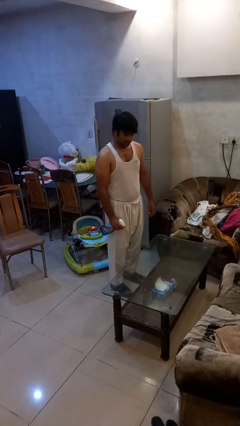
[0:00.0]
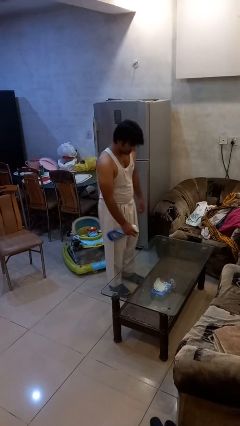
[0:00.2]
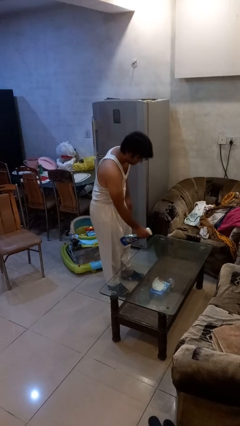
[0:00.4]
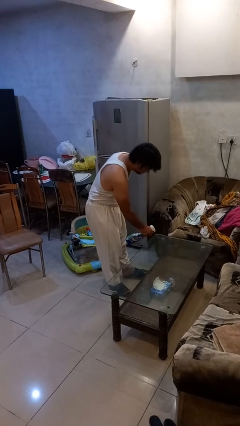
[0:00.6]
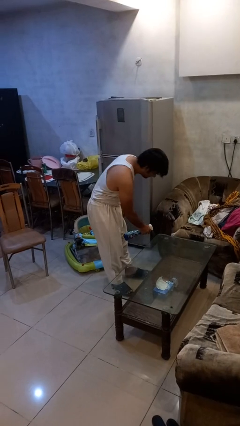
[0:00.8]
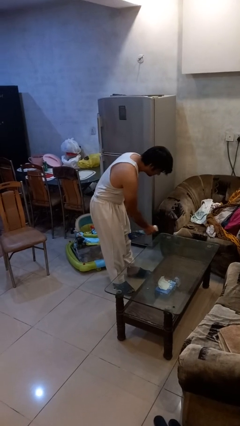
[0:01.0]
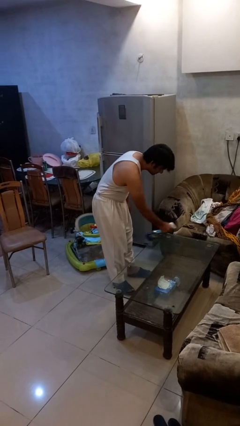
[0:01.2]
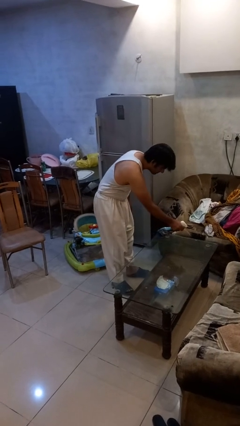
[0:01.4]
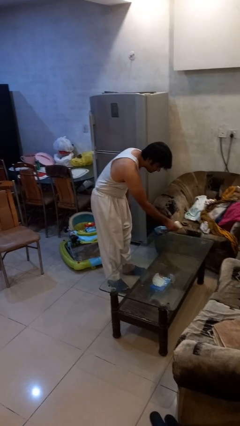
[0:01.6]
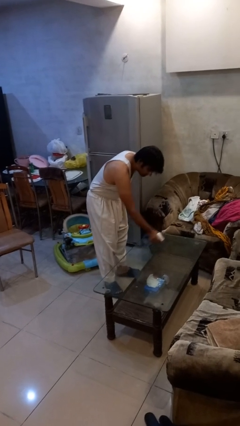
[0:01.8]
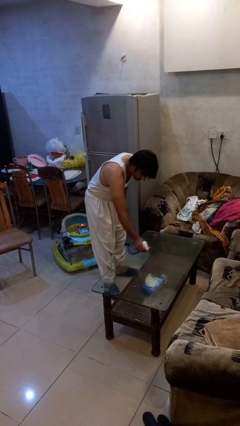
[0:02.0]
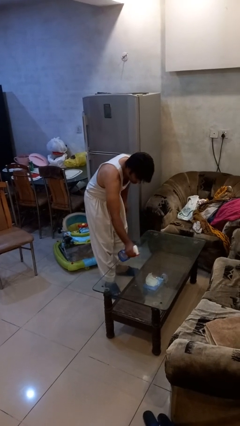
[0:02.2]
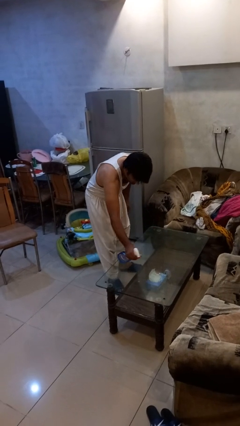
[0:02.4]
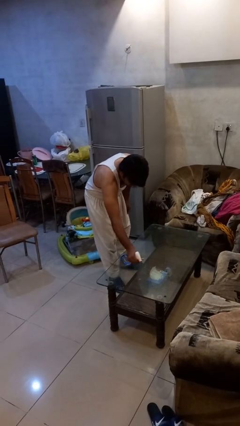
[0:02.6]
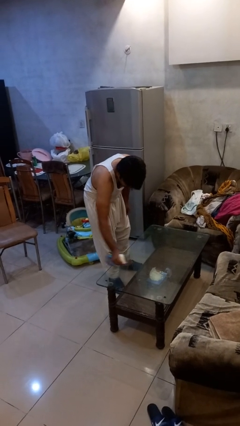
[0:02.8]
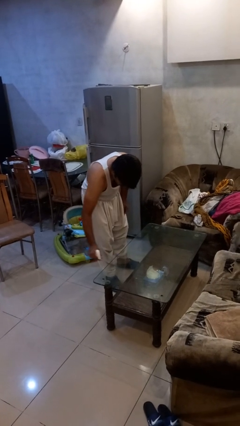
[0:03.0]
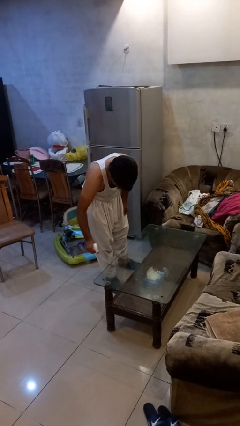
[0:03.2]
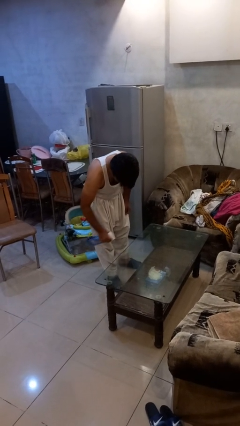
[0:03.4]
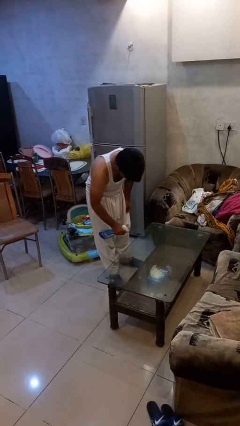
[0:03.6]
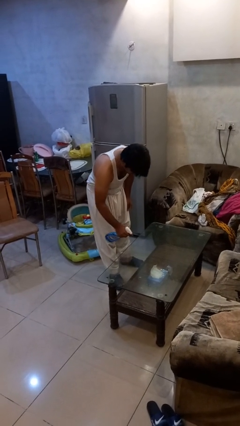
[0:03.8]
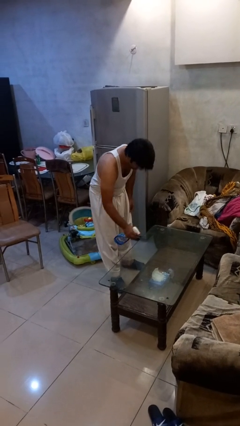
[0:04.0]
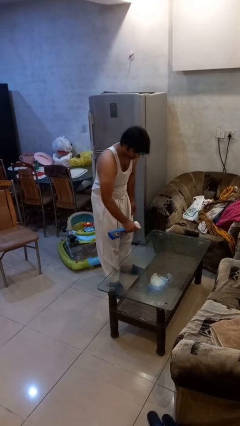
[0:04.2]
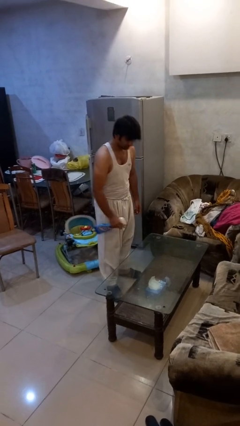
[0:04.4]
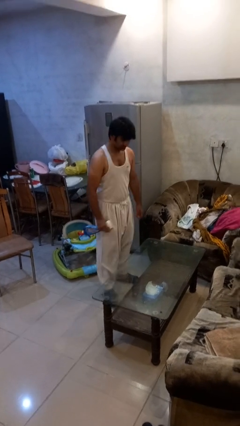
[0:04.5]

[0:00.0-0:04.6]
person sprays from bottle

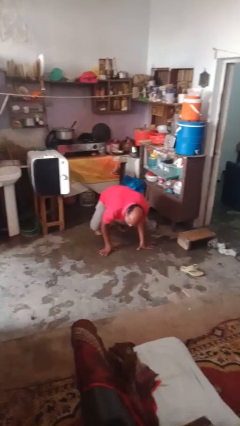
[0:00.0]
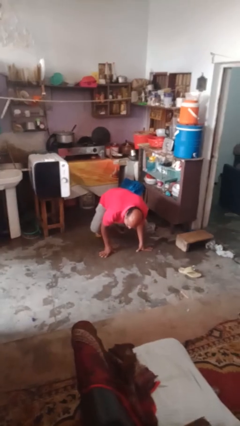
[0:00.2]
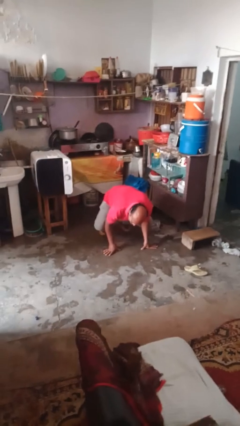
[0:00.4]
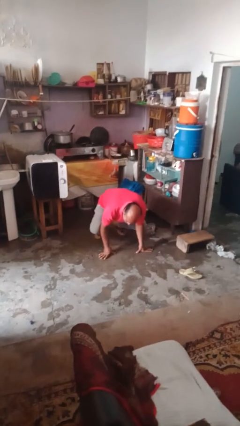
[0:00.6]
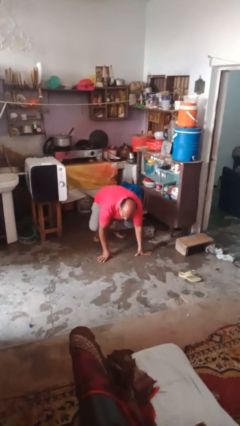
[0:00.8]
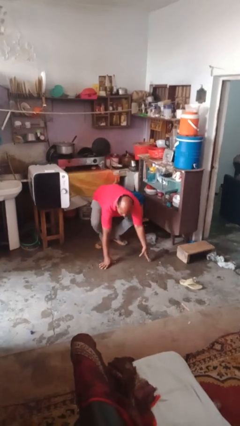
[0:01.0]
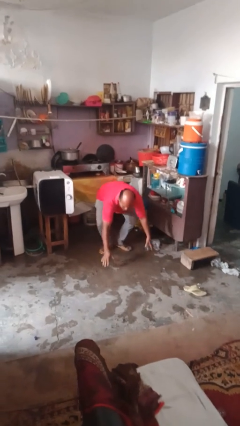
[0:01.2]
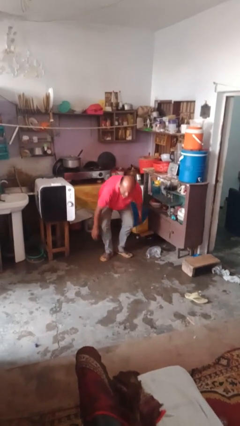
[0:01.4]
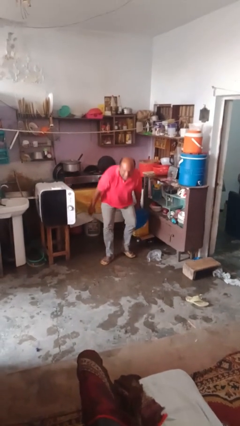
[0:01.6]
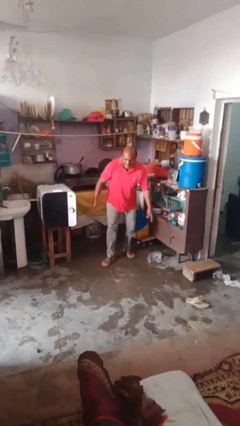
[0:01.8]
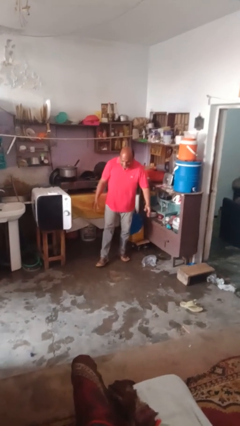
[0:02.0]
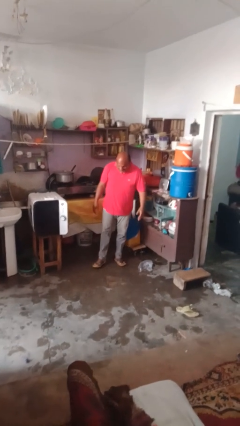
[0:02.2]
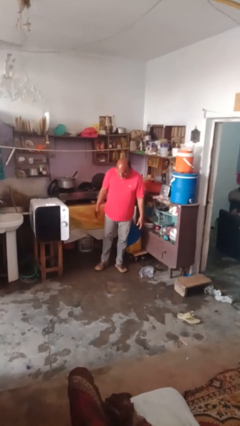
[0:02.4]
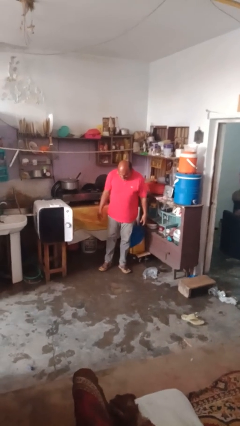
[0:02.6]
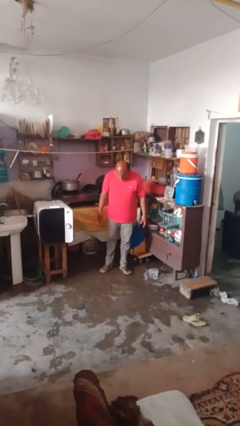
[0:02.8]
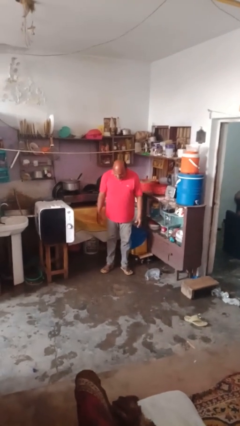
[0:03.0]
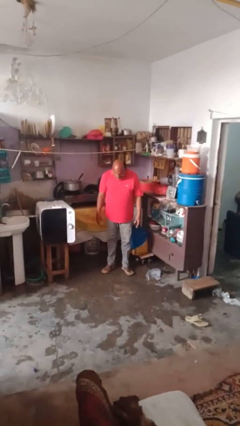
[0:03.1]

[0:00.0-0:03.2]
person stands up from floor

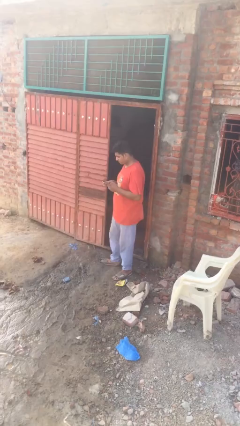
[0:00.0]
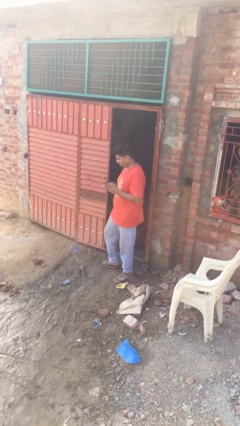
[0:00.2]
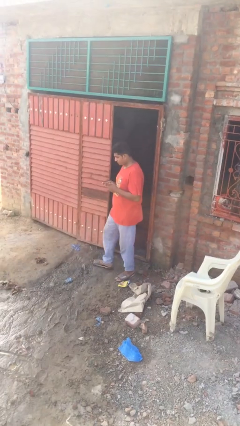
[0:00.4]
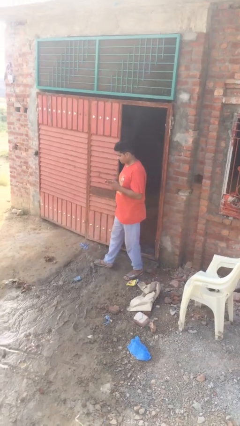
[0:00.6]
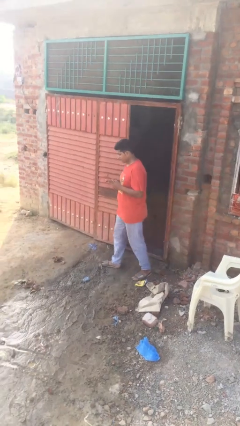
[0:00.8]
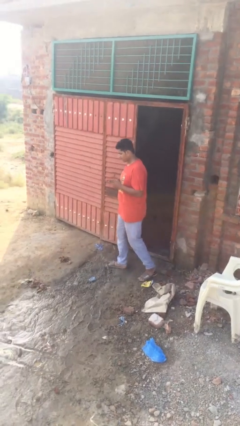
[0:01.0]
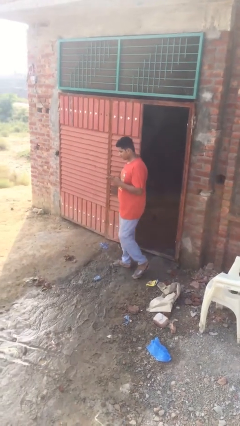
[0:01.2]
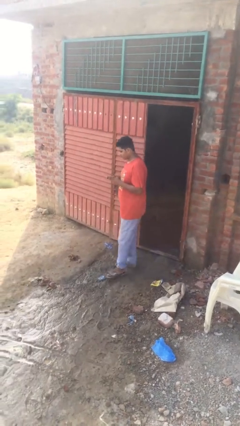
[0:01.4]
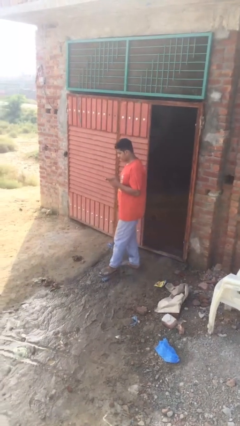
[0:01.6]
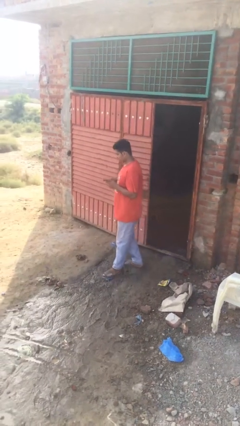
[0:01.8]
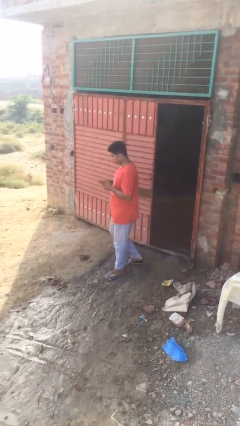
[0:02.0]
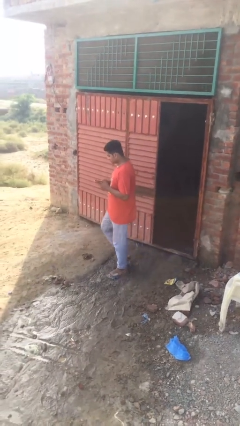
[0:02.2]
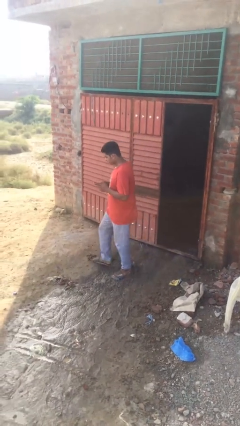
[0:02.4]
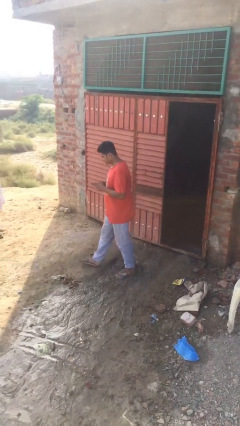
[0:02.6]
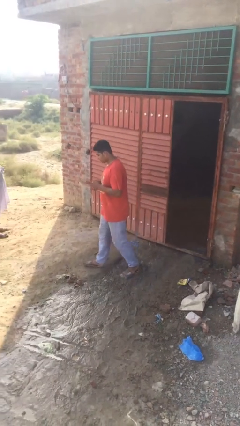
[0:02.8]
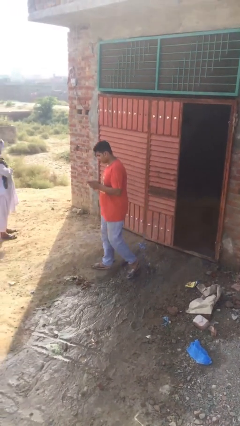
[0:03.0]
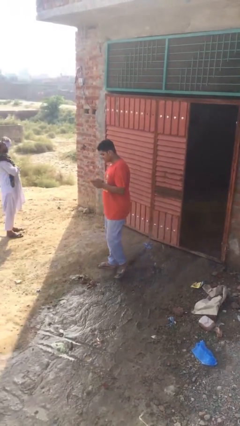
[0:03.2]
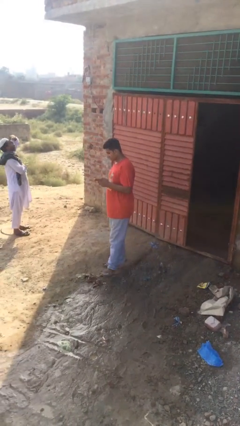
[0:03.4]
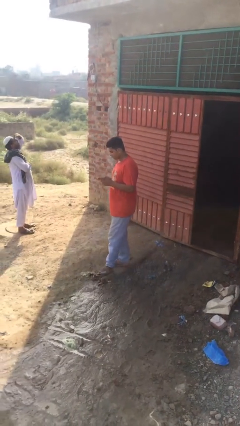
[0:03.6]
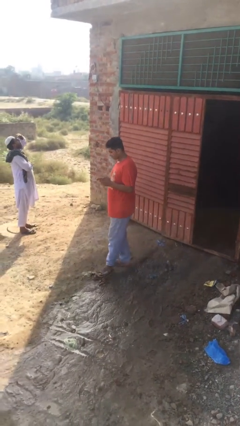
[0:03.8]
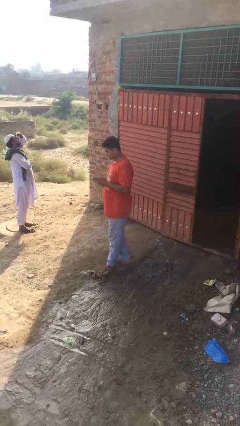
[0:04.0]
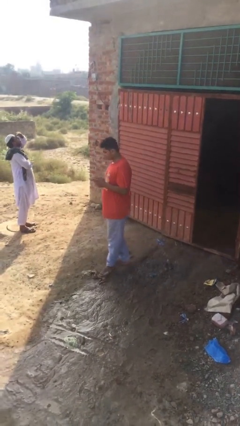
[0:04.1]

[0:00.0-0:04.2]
person texts on phone

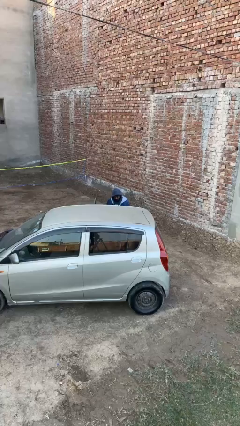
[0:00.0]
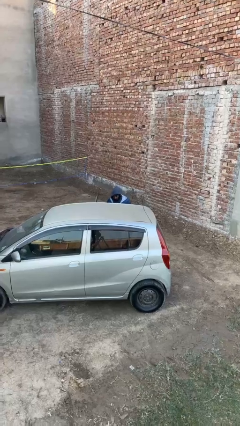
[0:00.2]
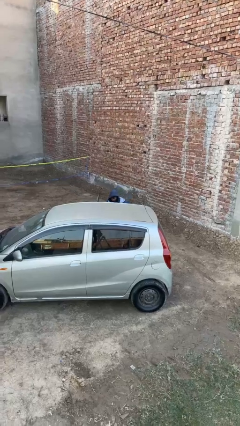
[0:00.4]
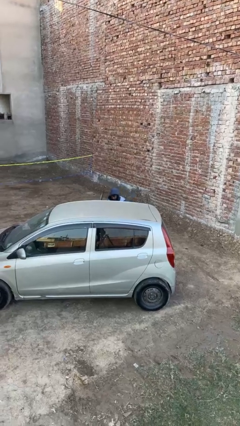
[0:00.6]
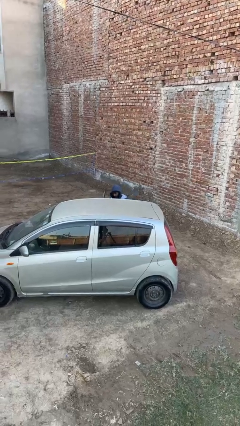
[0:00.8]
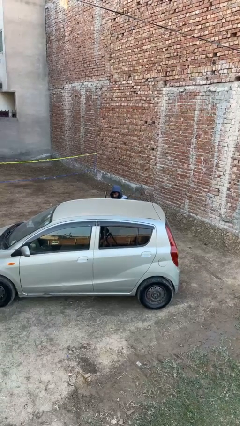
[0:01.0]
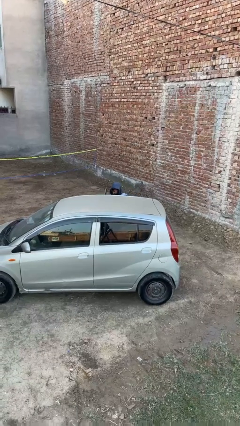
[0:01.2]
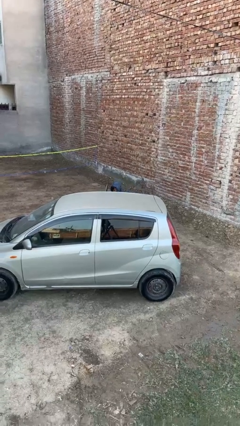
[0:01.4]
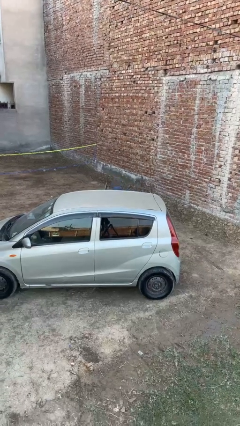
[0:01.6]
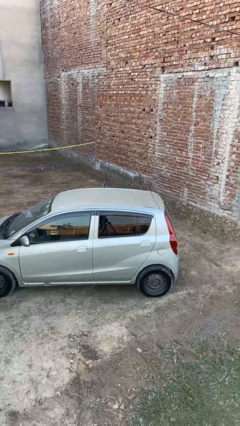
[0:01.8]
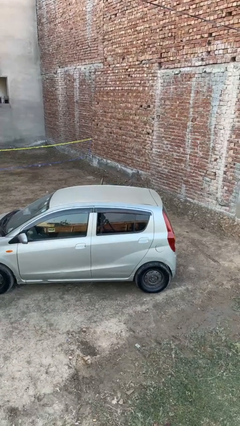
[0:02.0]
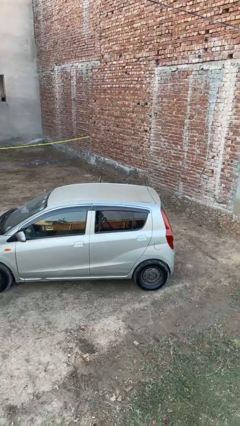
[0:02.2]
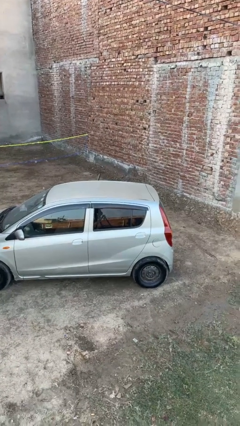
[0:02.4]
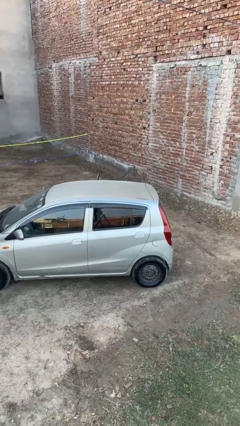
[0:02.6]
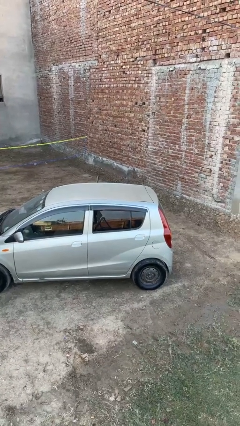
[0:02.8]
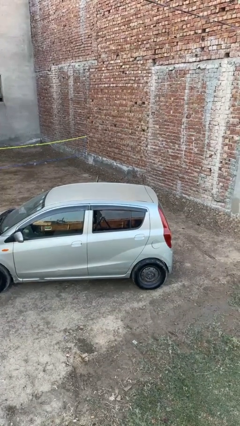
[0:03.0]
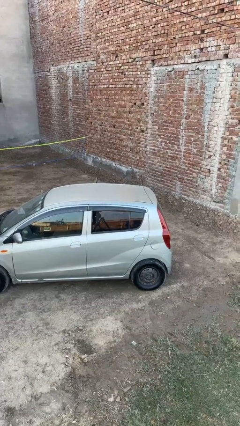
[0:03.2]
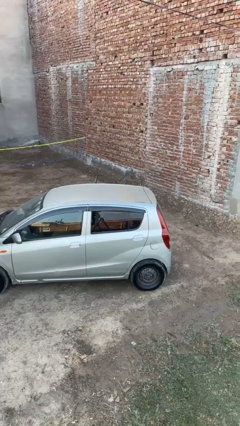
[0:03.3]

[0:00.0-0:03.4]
person enters car

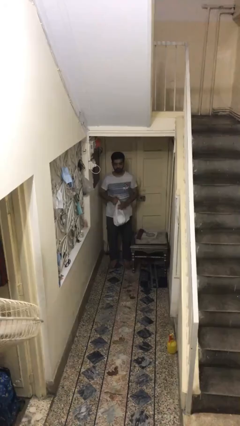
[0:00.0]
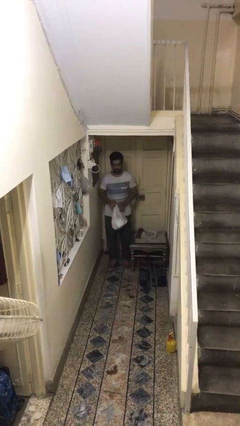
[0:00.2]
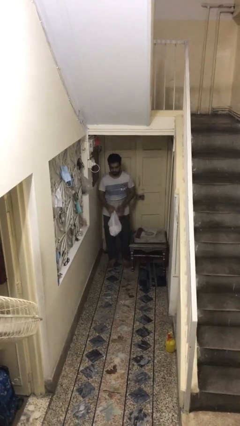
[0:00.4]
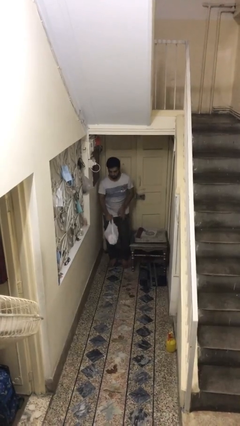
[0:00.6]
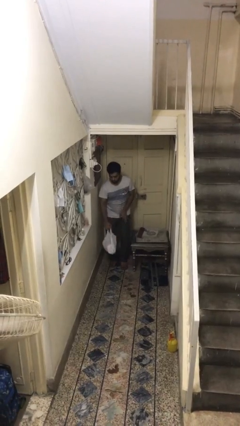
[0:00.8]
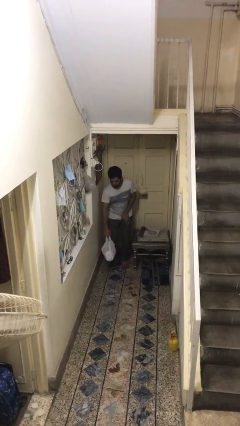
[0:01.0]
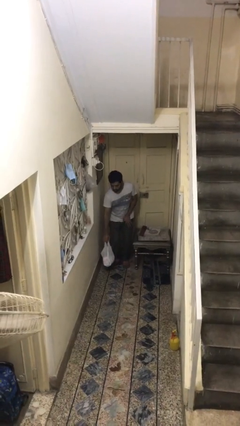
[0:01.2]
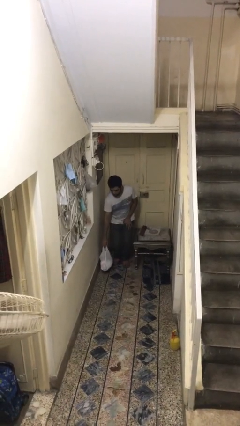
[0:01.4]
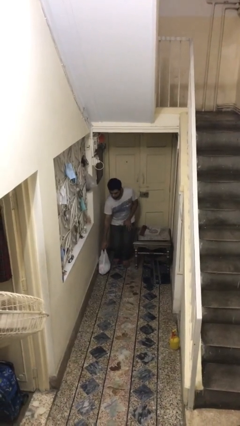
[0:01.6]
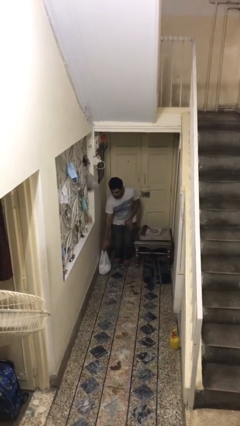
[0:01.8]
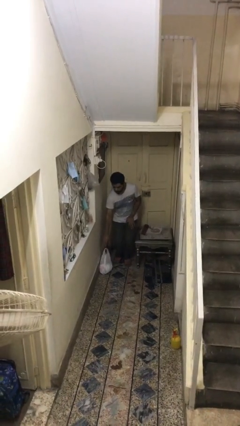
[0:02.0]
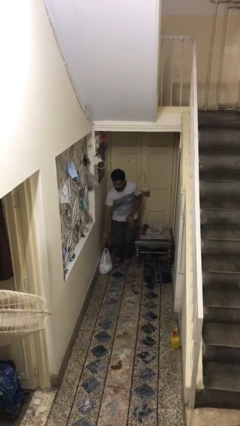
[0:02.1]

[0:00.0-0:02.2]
person puts down object on floor
